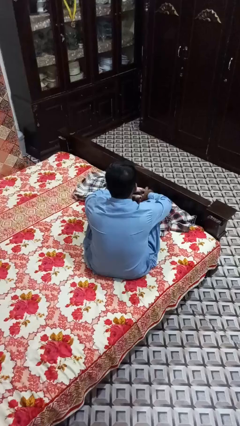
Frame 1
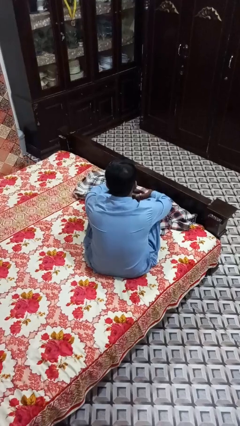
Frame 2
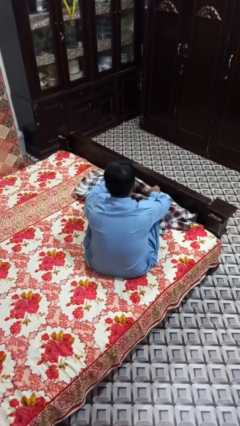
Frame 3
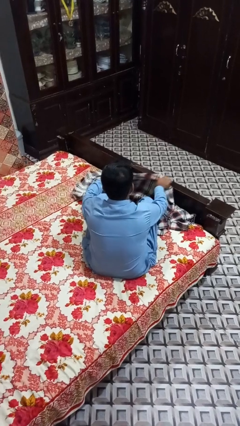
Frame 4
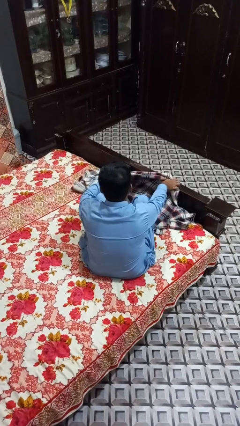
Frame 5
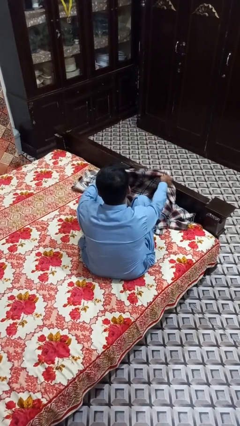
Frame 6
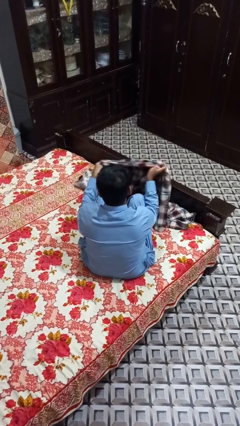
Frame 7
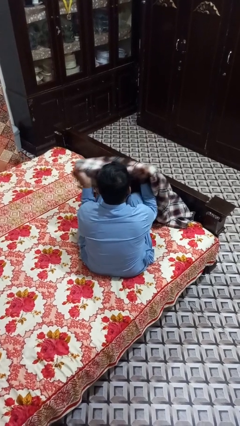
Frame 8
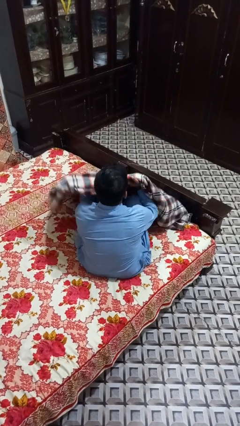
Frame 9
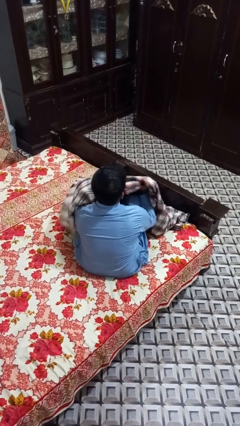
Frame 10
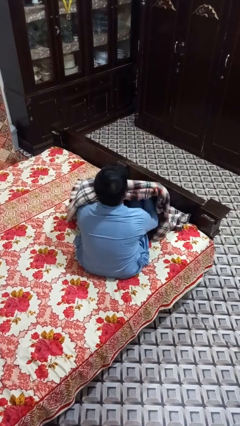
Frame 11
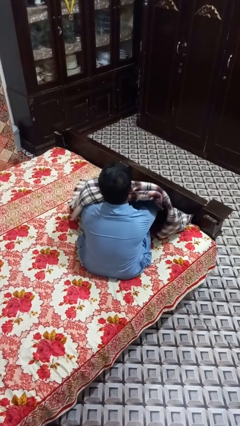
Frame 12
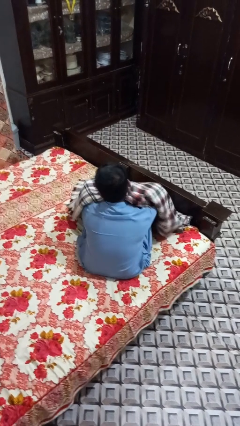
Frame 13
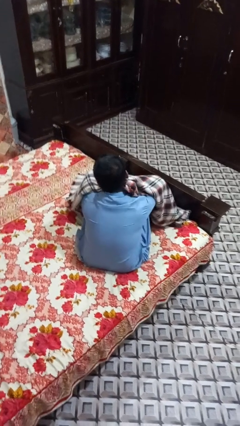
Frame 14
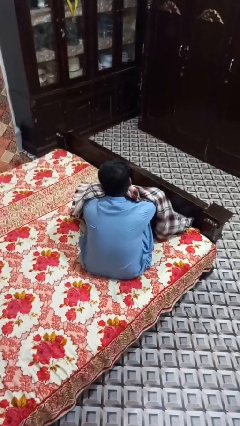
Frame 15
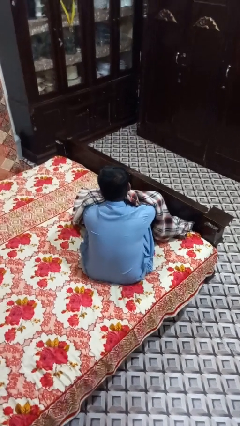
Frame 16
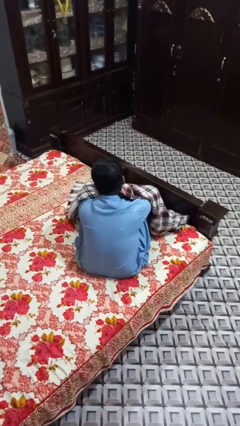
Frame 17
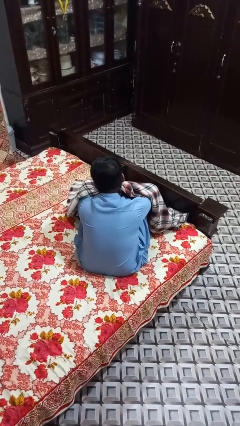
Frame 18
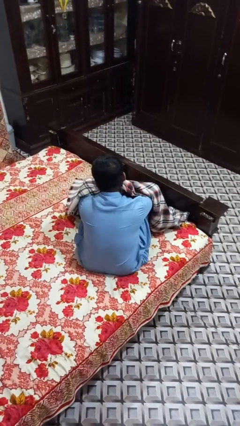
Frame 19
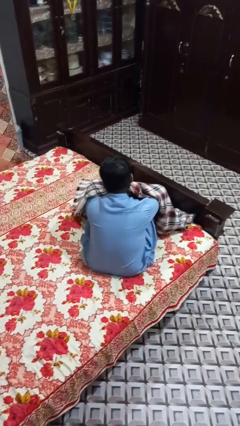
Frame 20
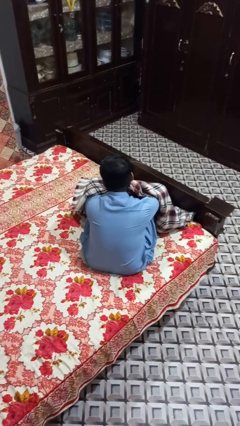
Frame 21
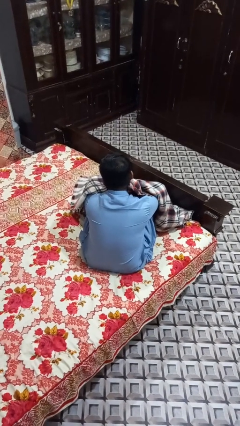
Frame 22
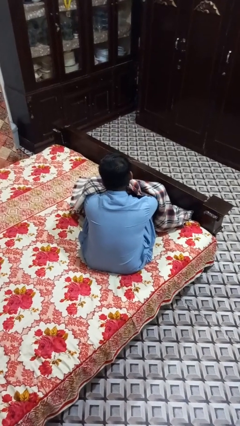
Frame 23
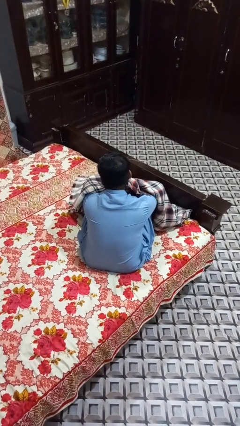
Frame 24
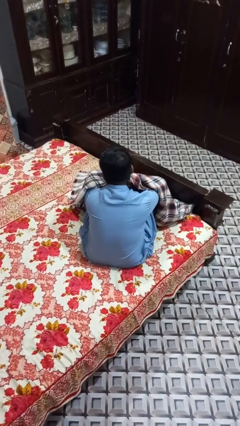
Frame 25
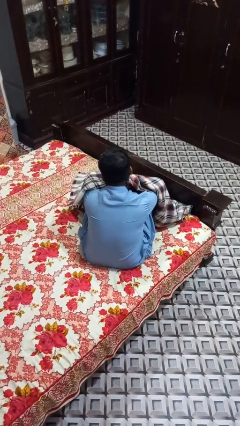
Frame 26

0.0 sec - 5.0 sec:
person covers with blanket

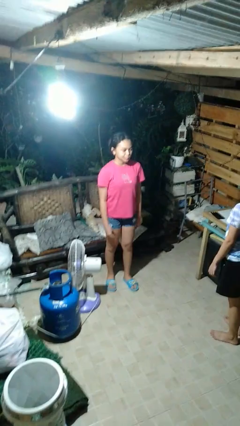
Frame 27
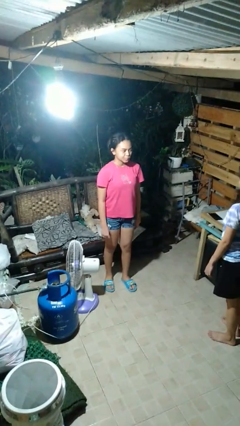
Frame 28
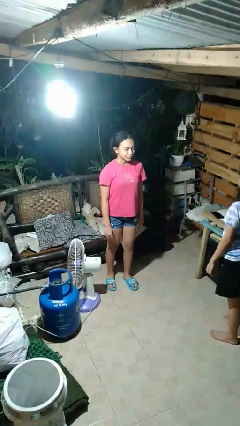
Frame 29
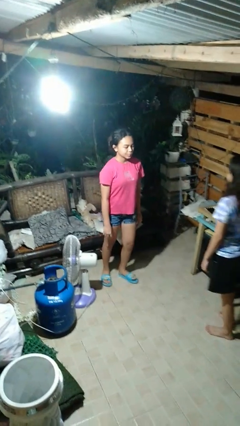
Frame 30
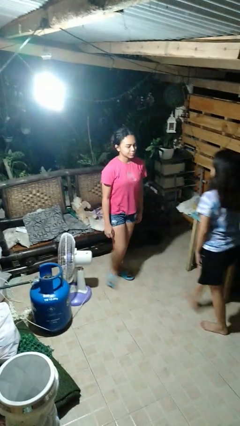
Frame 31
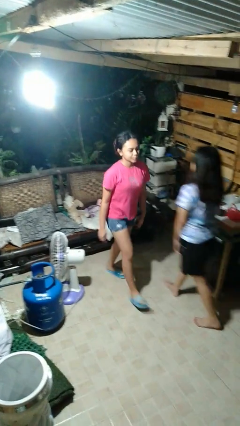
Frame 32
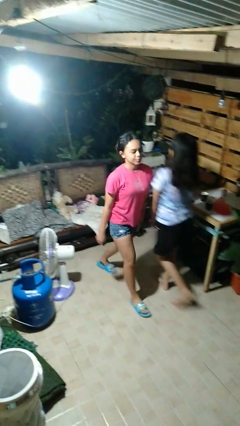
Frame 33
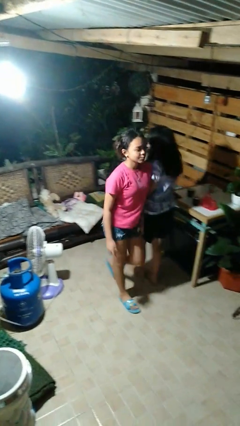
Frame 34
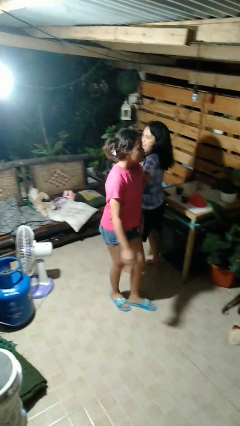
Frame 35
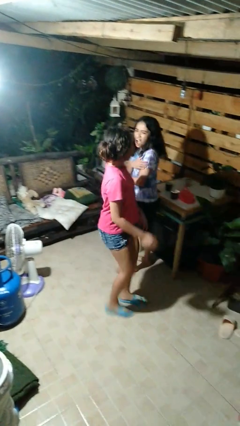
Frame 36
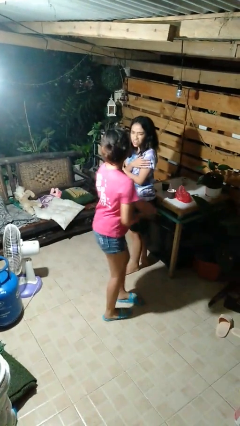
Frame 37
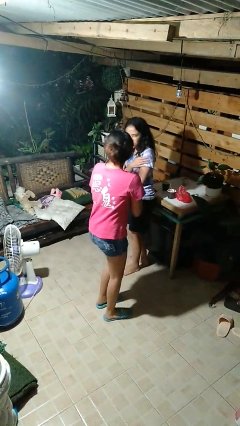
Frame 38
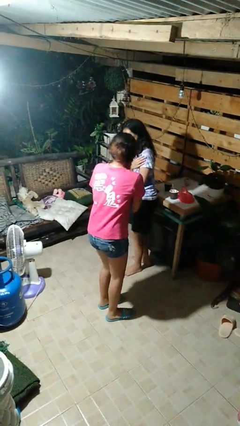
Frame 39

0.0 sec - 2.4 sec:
person bumps into person

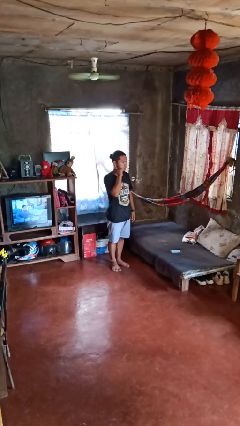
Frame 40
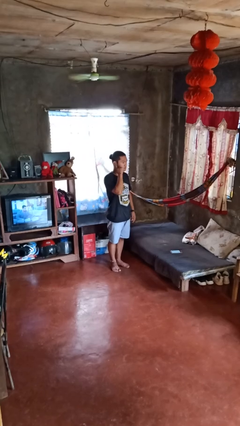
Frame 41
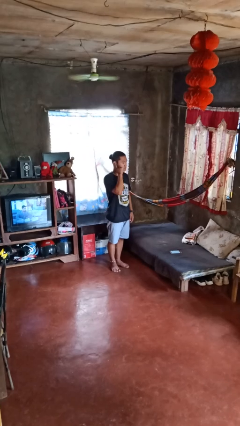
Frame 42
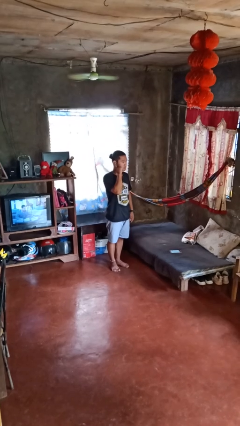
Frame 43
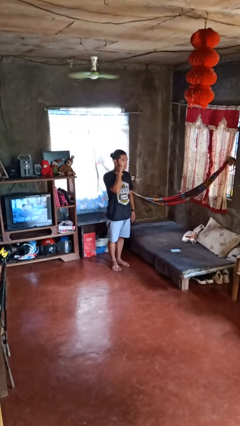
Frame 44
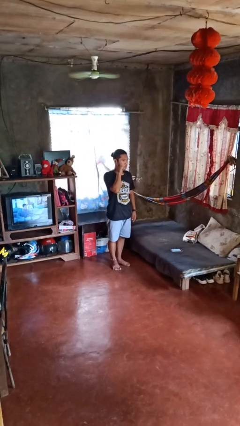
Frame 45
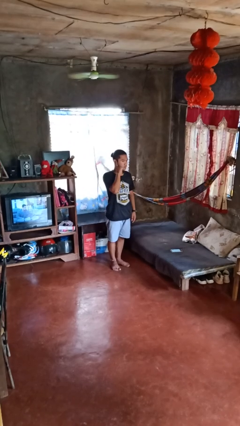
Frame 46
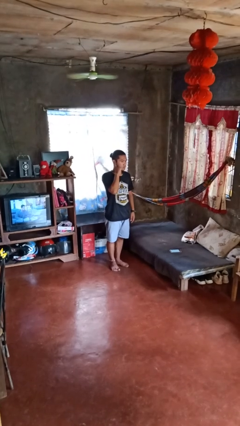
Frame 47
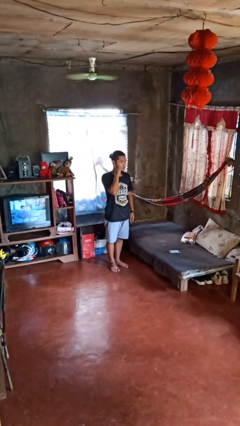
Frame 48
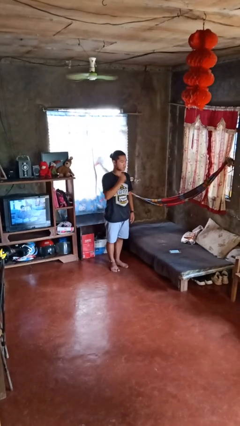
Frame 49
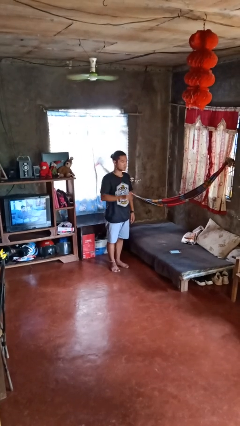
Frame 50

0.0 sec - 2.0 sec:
person gestures listen closely

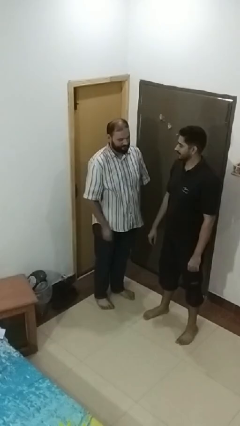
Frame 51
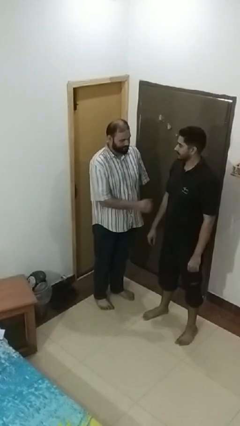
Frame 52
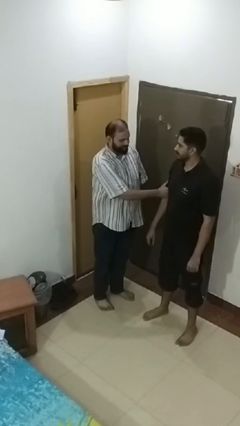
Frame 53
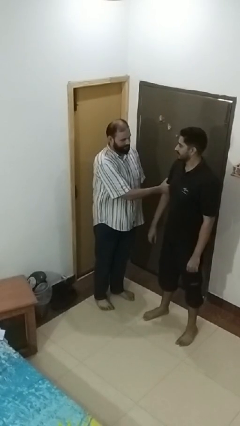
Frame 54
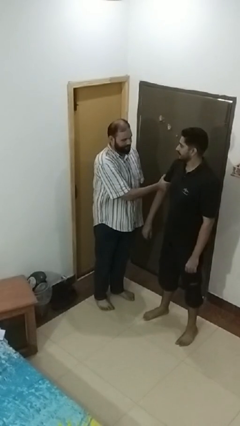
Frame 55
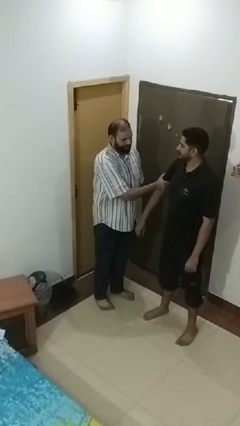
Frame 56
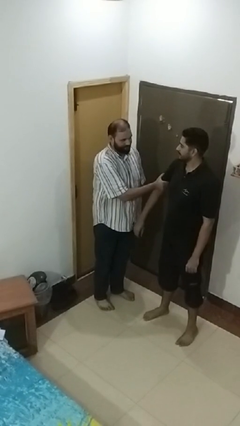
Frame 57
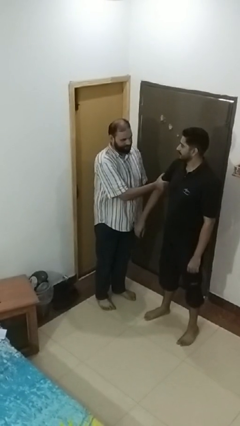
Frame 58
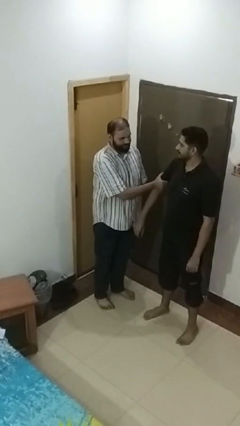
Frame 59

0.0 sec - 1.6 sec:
person grabs person by bicep

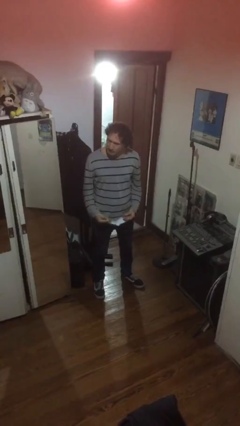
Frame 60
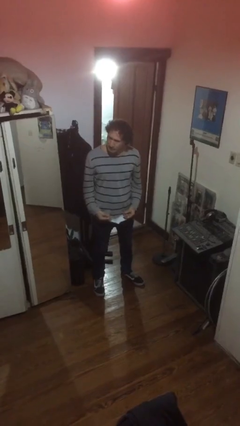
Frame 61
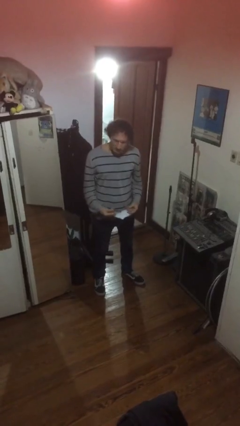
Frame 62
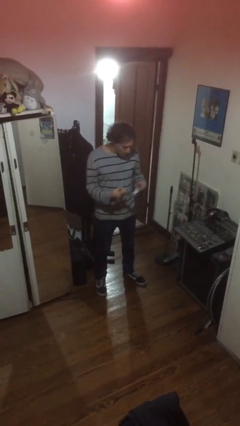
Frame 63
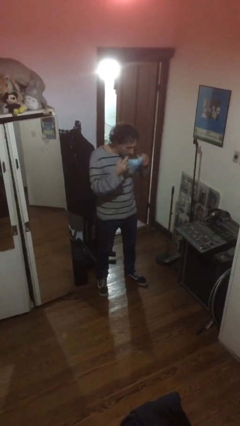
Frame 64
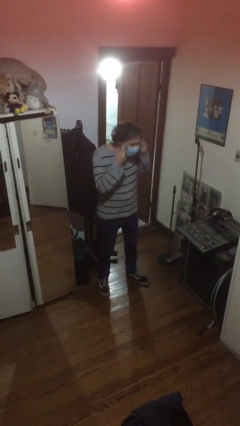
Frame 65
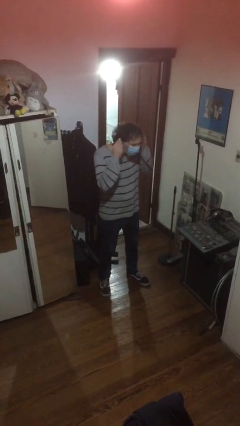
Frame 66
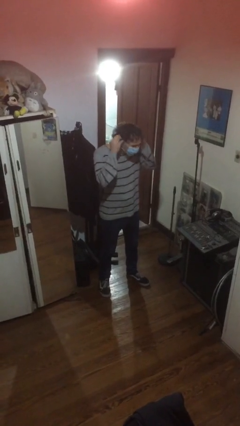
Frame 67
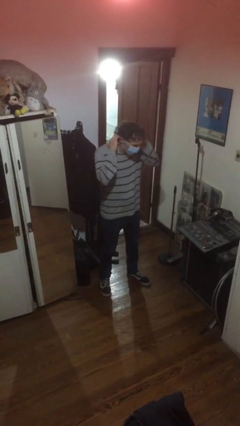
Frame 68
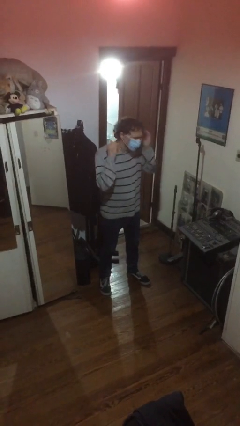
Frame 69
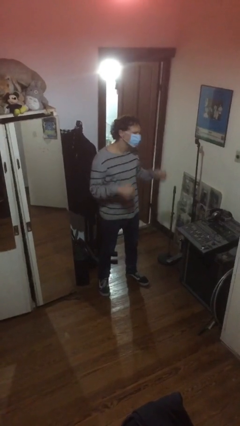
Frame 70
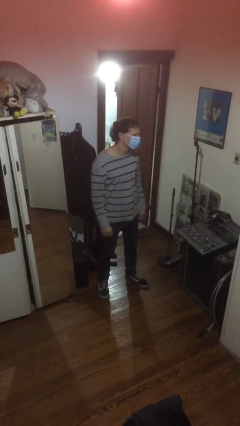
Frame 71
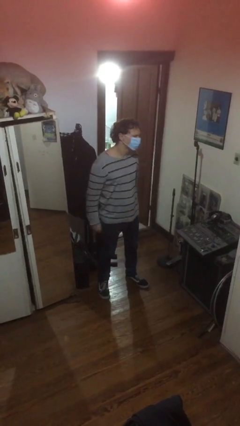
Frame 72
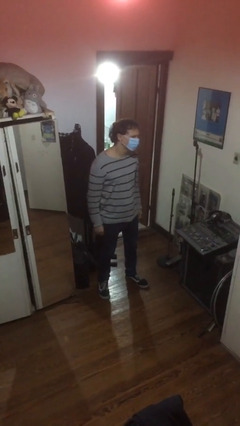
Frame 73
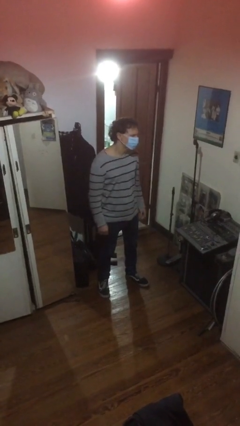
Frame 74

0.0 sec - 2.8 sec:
person puts on facemask

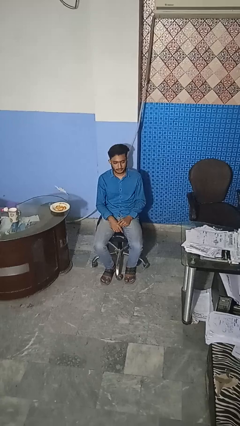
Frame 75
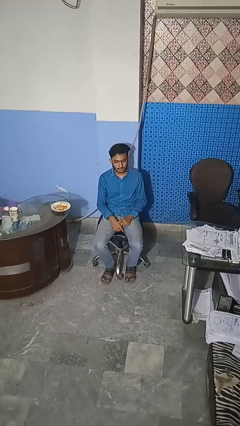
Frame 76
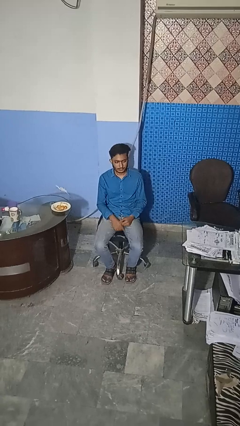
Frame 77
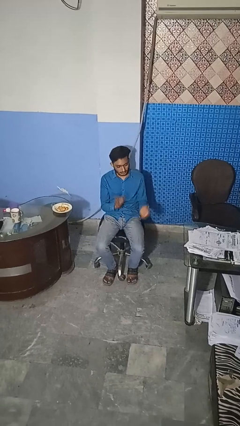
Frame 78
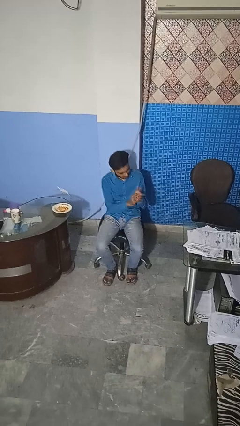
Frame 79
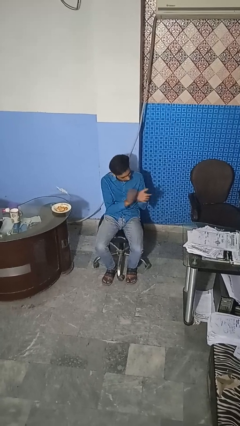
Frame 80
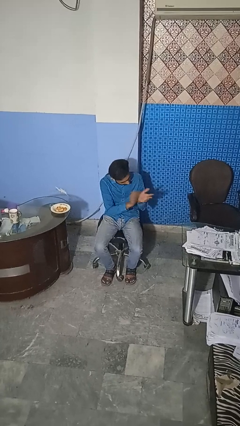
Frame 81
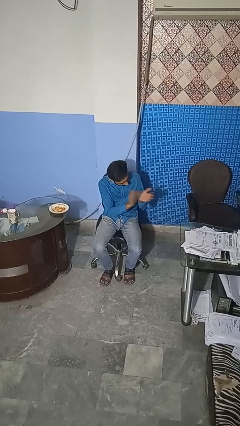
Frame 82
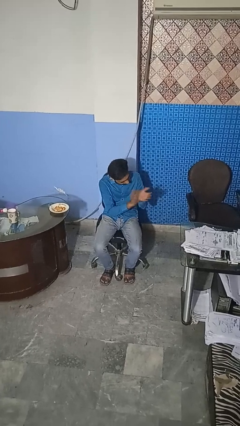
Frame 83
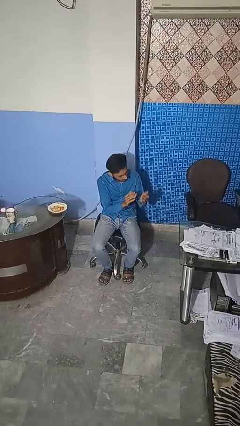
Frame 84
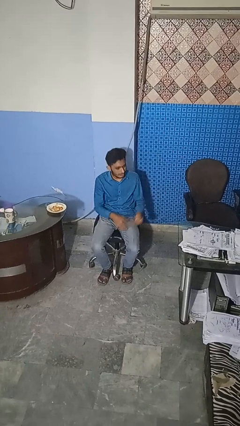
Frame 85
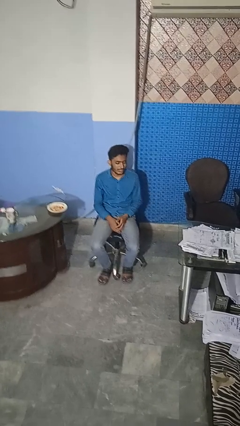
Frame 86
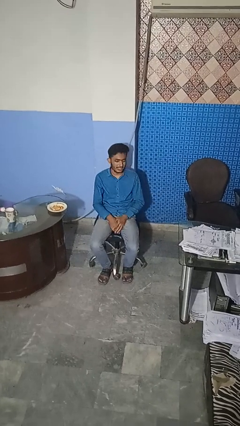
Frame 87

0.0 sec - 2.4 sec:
person claps hands

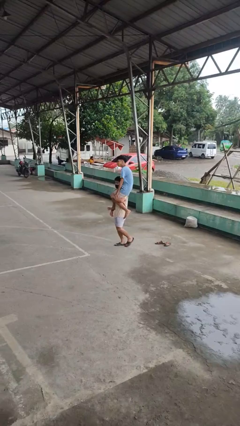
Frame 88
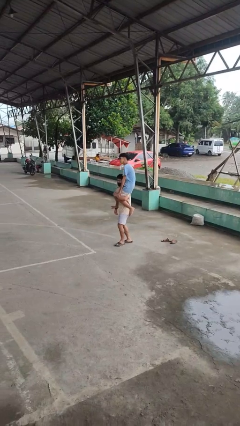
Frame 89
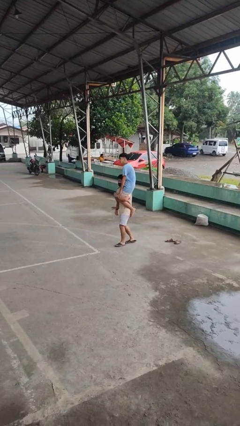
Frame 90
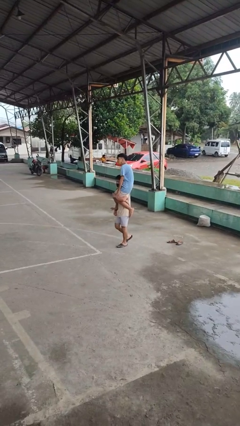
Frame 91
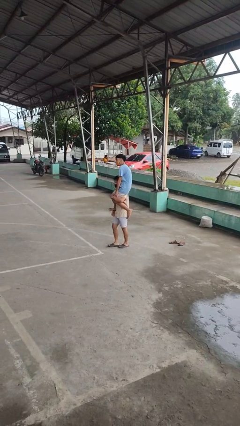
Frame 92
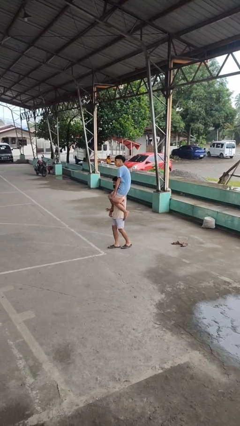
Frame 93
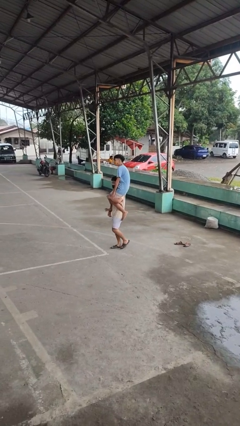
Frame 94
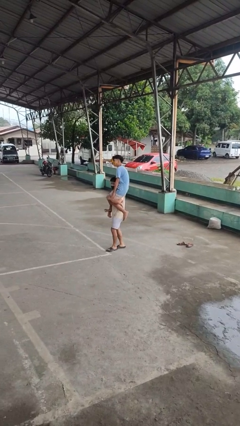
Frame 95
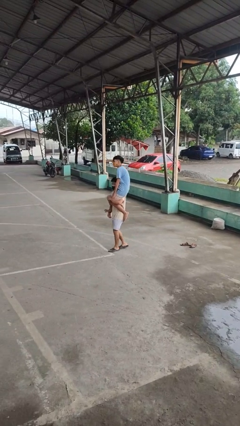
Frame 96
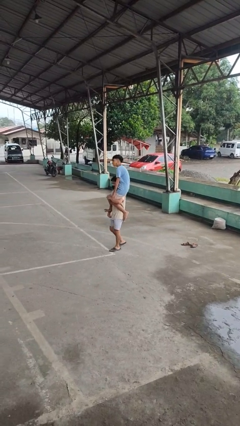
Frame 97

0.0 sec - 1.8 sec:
person carries person on shoulders
